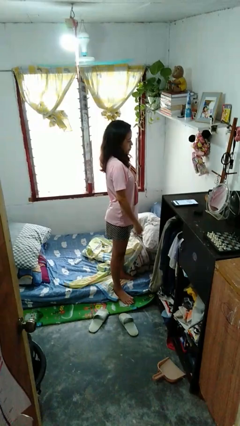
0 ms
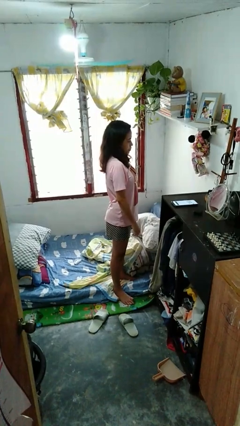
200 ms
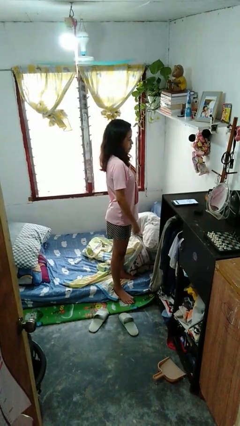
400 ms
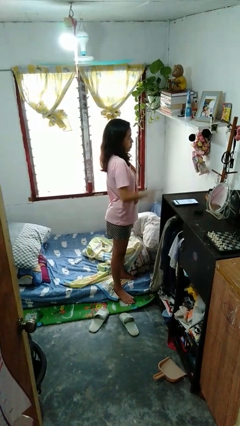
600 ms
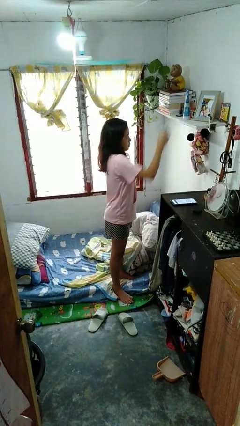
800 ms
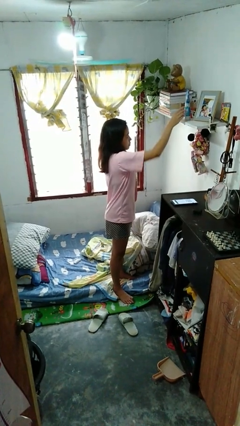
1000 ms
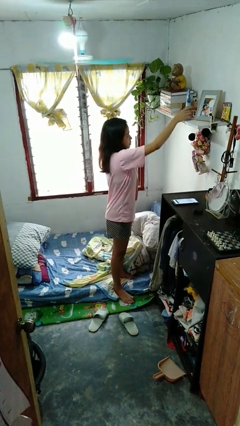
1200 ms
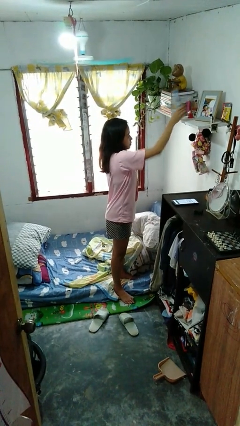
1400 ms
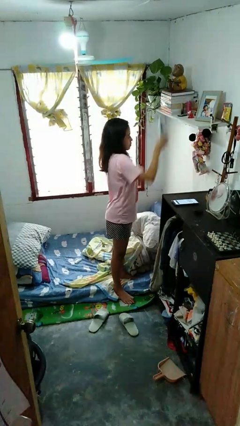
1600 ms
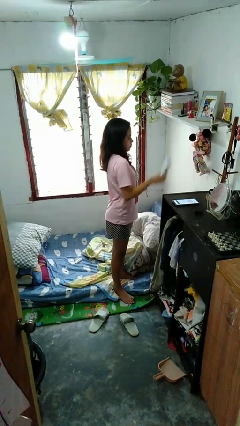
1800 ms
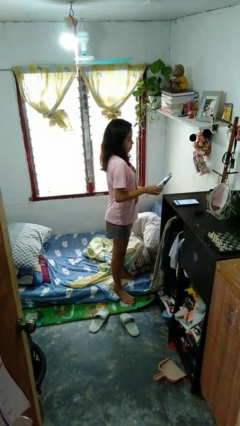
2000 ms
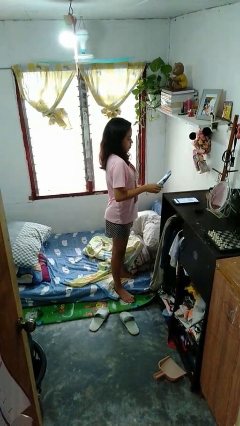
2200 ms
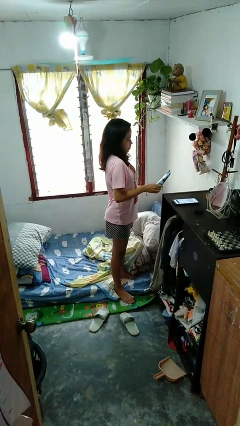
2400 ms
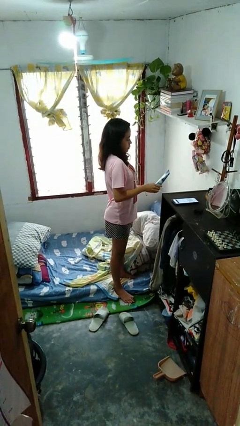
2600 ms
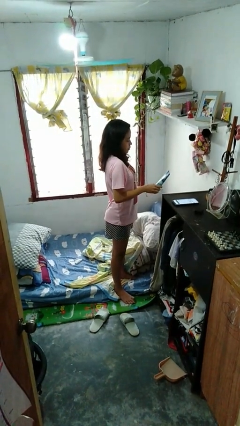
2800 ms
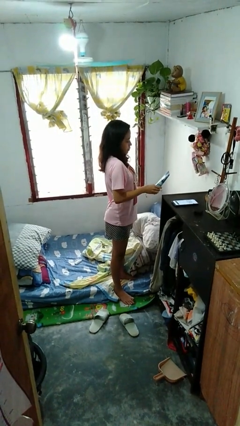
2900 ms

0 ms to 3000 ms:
person applies foundation makeup

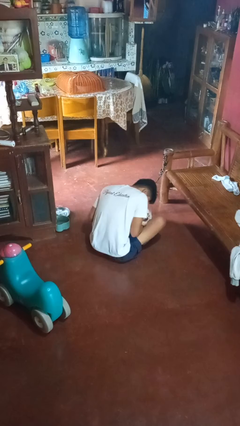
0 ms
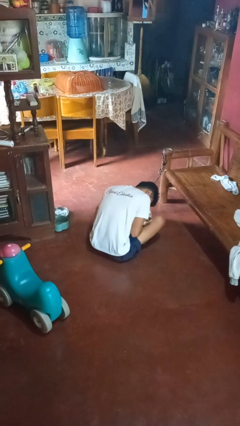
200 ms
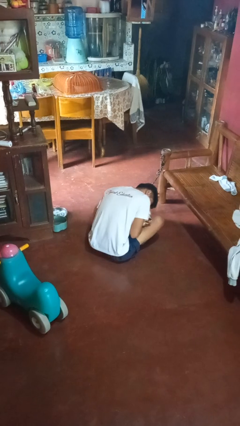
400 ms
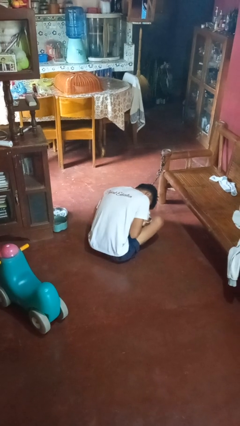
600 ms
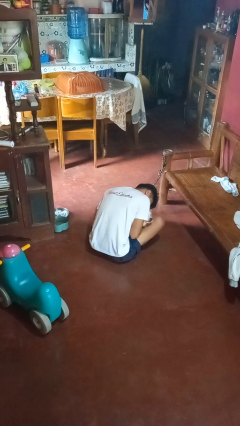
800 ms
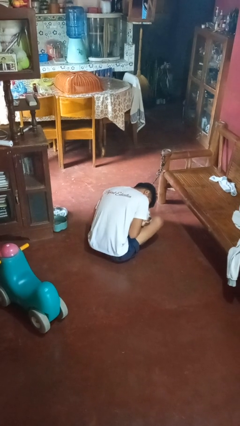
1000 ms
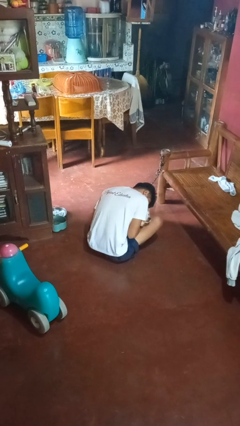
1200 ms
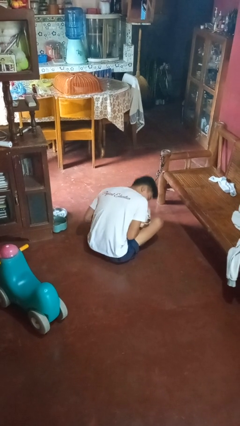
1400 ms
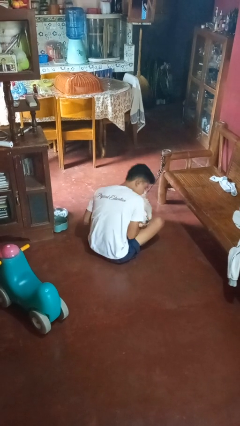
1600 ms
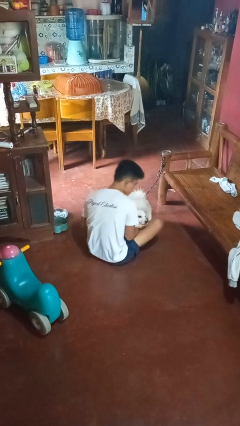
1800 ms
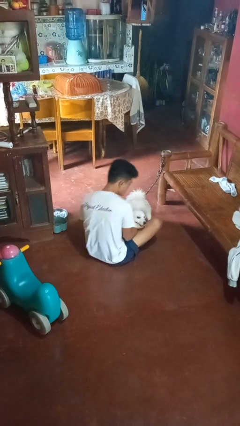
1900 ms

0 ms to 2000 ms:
person hugs dog

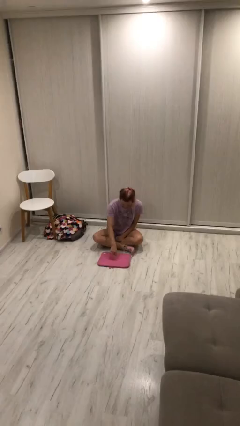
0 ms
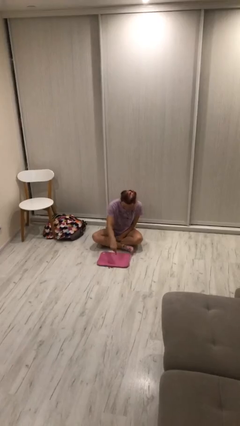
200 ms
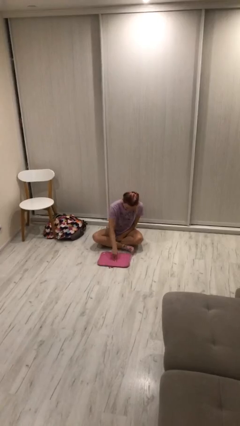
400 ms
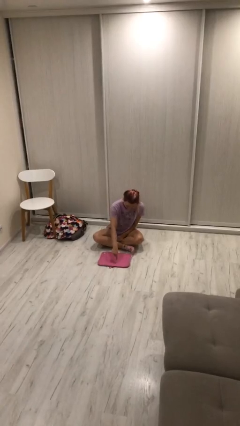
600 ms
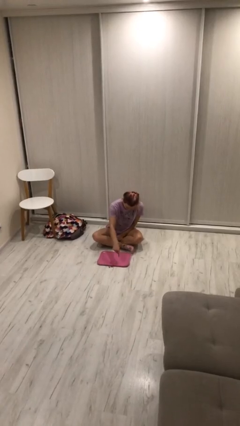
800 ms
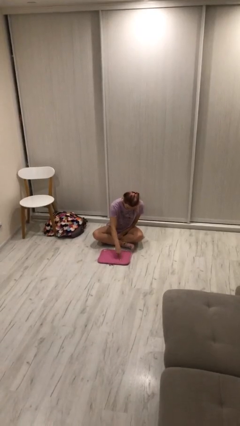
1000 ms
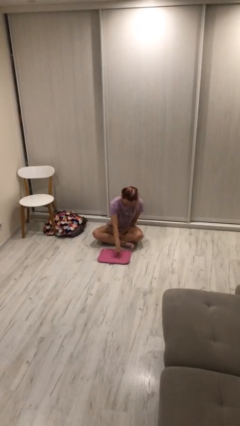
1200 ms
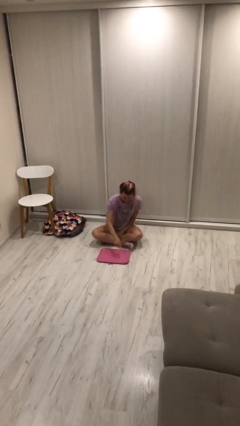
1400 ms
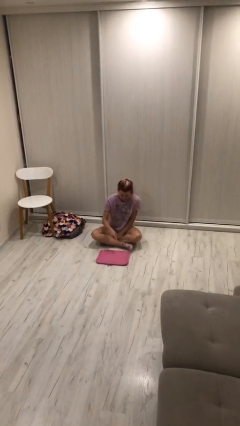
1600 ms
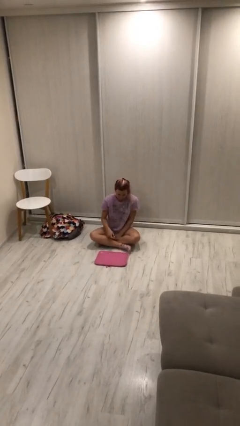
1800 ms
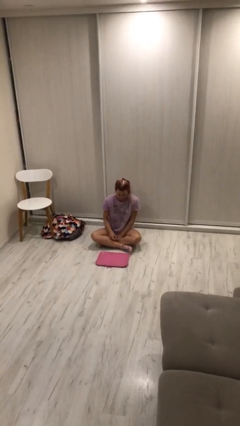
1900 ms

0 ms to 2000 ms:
person taps object with finger

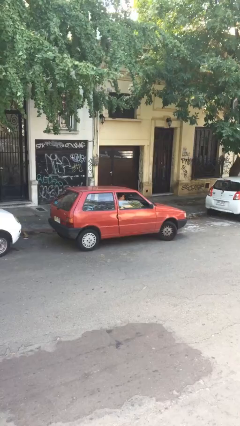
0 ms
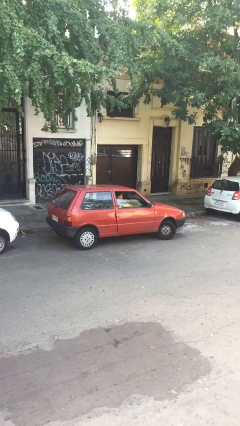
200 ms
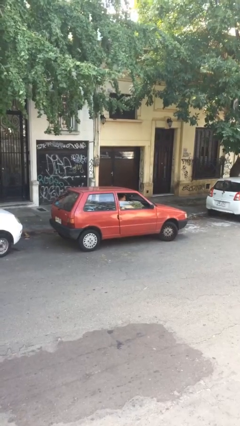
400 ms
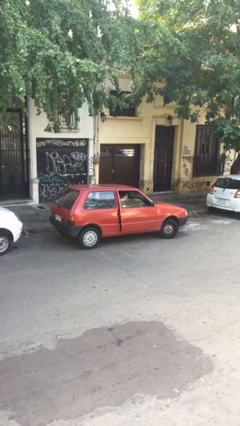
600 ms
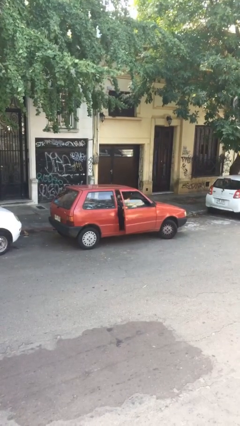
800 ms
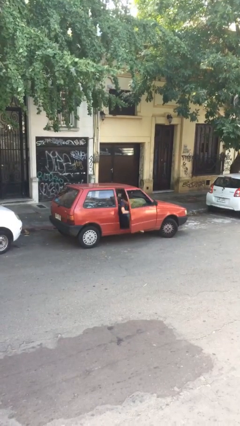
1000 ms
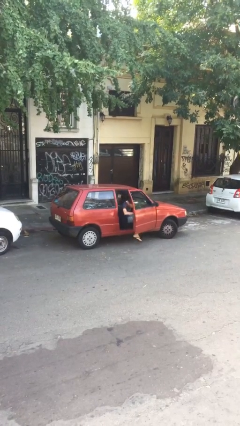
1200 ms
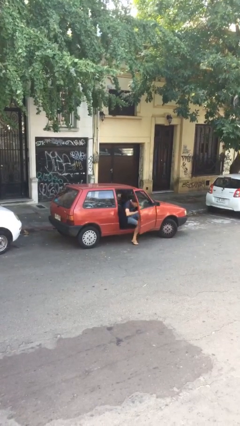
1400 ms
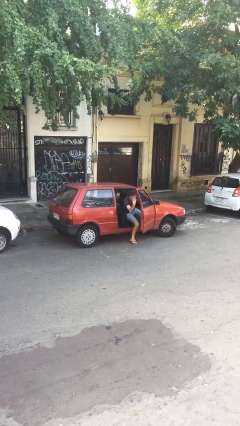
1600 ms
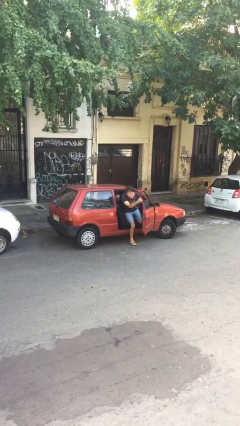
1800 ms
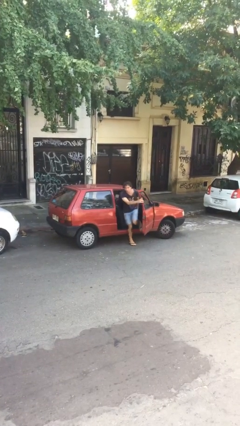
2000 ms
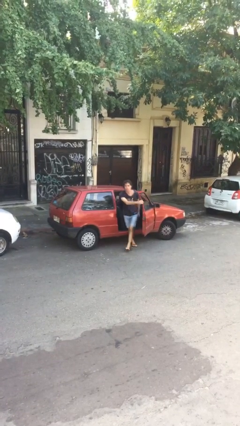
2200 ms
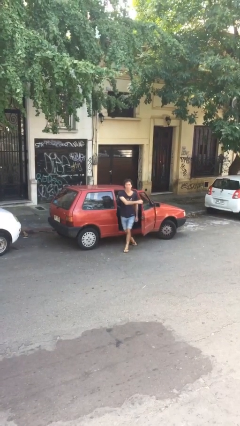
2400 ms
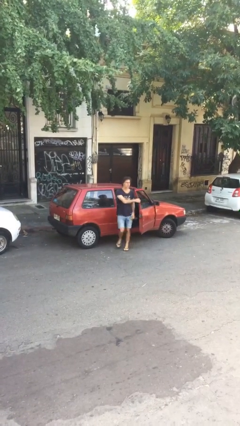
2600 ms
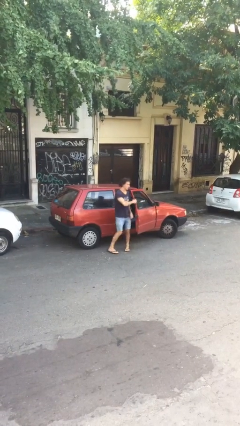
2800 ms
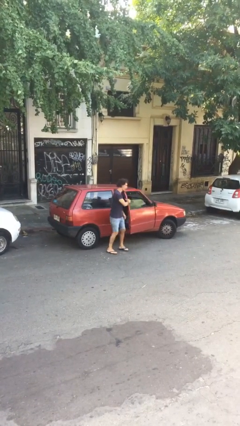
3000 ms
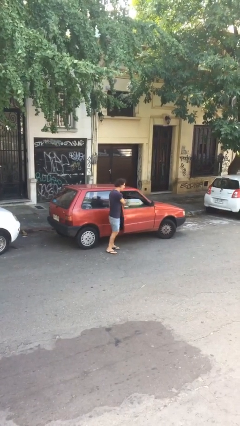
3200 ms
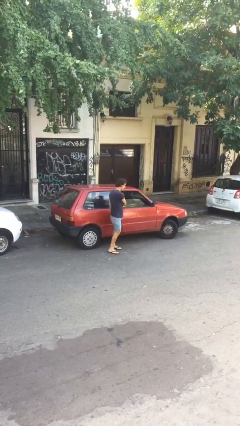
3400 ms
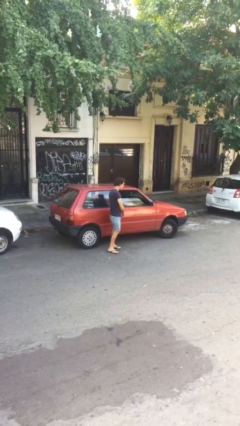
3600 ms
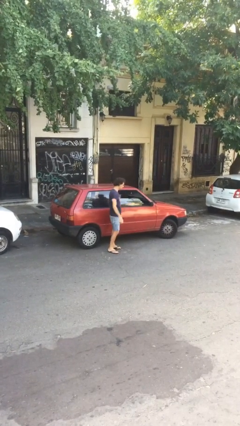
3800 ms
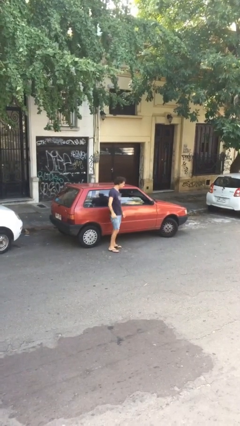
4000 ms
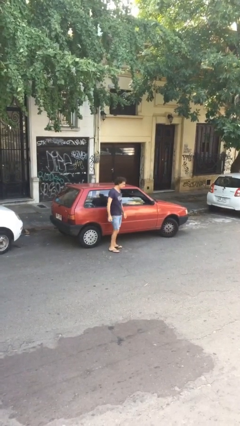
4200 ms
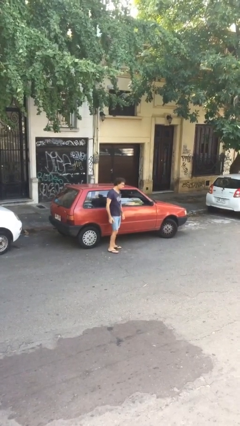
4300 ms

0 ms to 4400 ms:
car drops off person

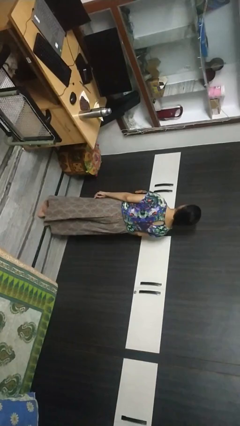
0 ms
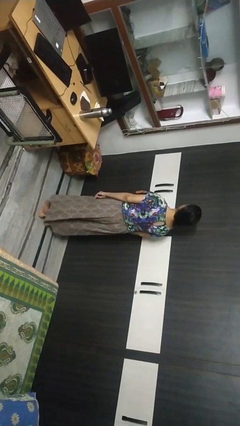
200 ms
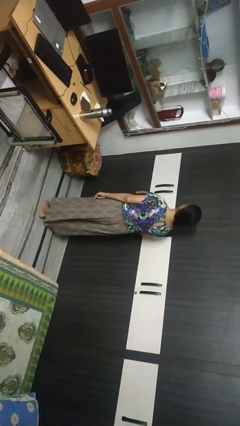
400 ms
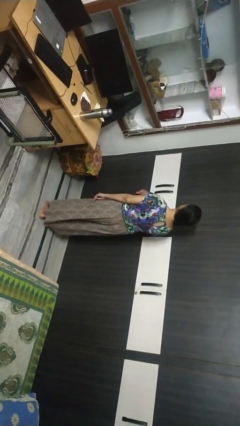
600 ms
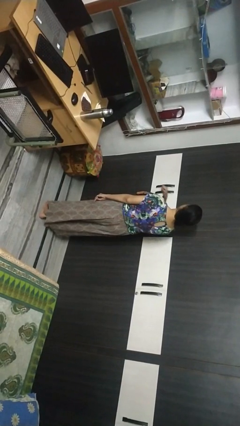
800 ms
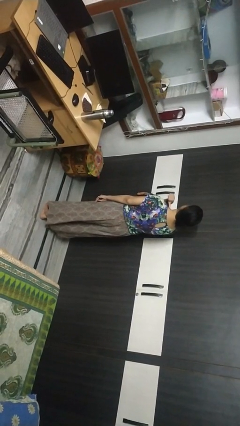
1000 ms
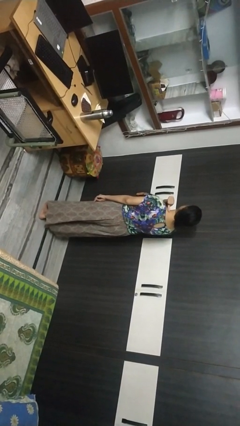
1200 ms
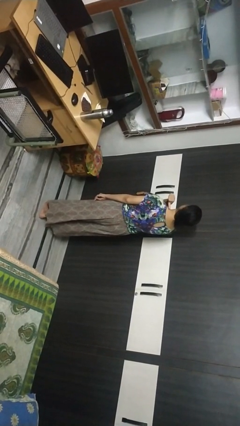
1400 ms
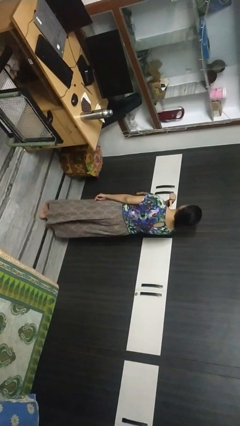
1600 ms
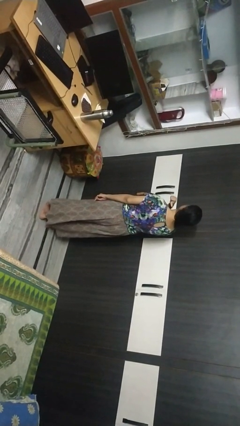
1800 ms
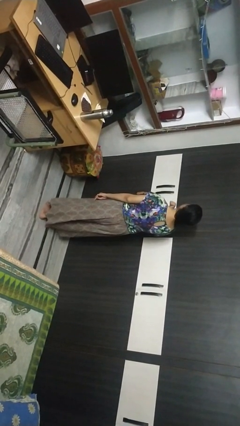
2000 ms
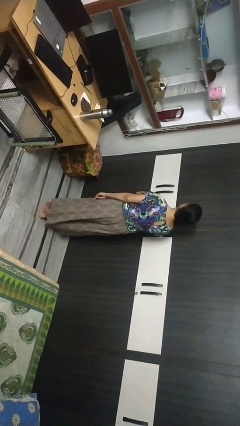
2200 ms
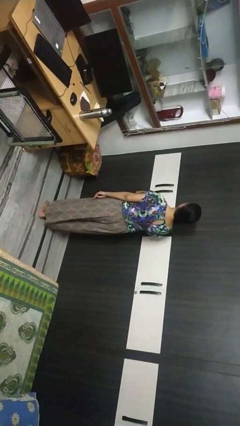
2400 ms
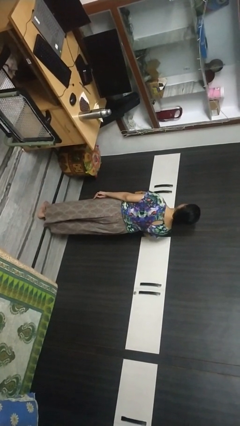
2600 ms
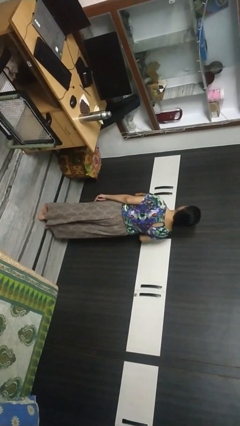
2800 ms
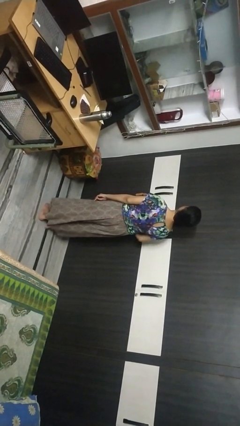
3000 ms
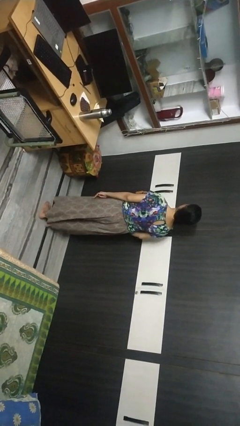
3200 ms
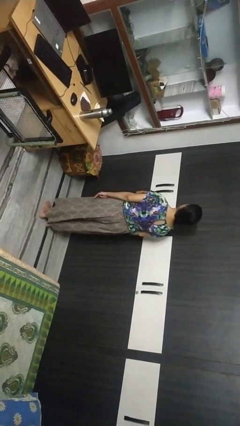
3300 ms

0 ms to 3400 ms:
person gestures cut

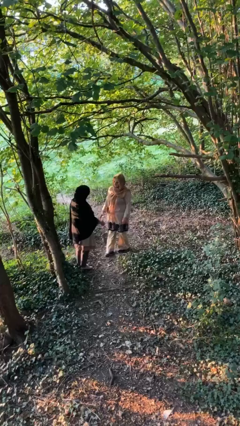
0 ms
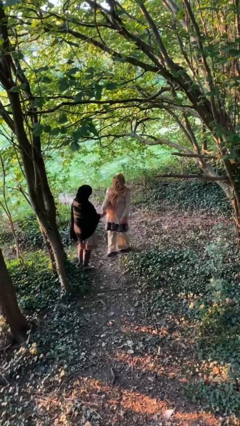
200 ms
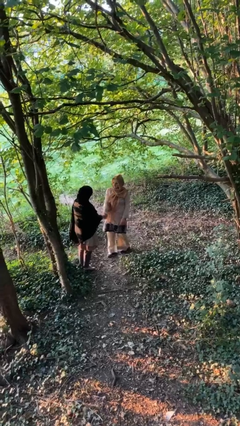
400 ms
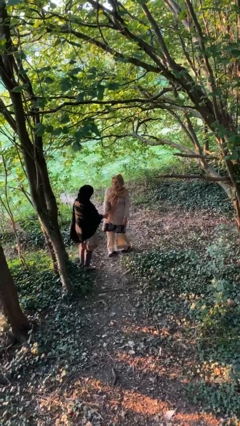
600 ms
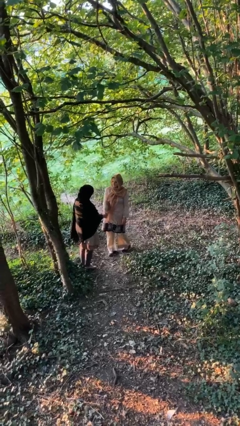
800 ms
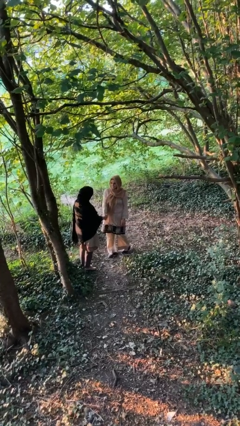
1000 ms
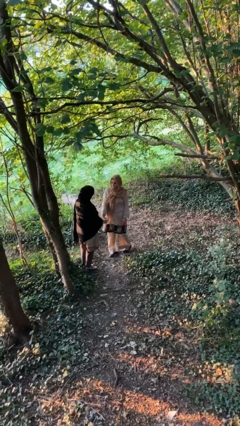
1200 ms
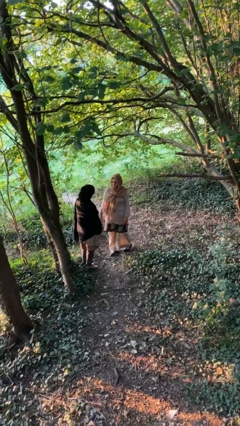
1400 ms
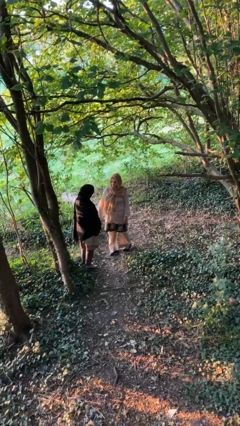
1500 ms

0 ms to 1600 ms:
person shakes hand

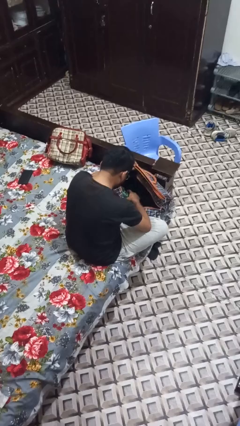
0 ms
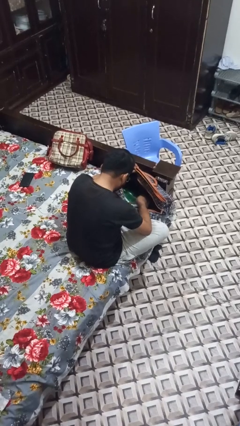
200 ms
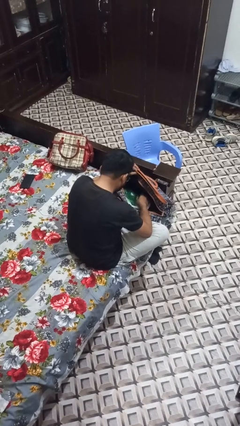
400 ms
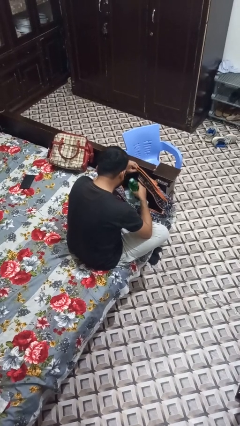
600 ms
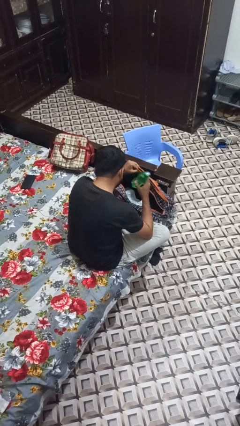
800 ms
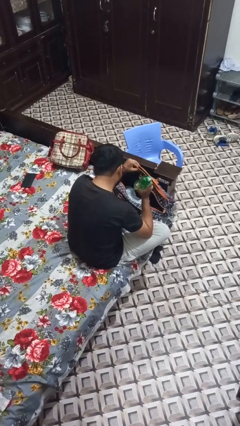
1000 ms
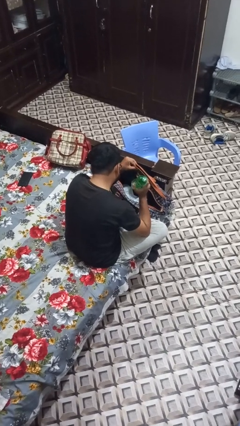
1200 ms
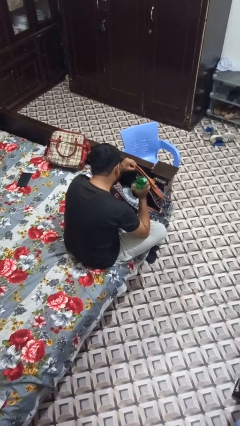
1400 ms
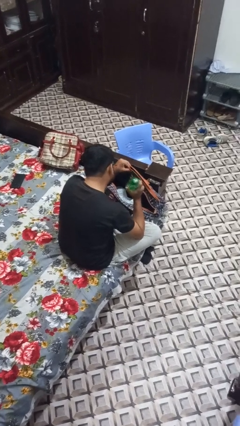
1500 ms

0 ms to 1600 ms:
person takes object from backpack
